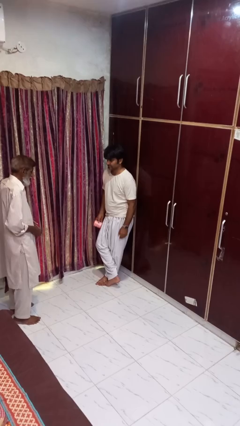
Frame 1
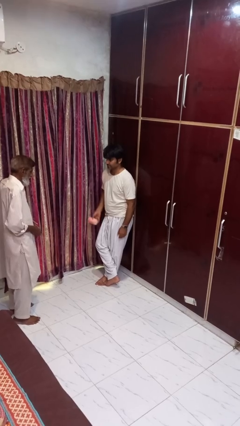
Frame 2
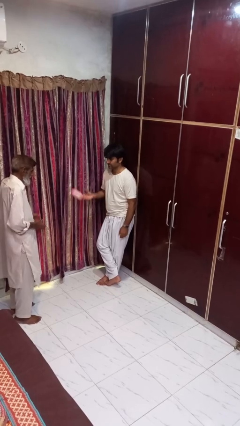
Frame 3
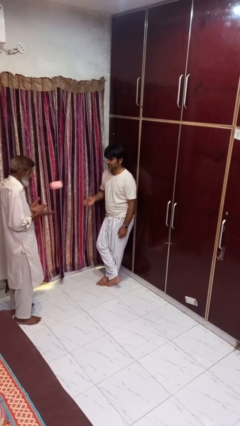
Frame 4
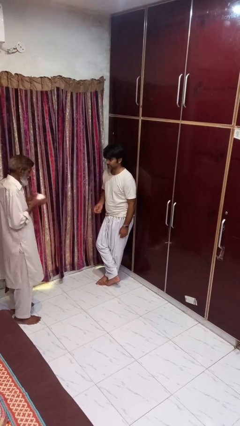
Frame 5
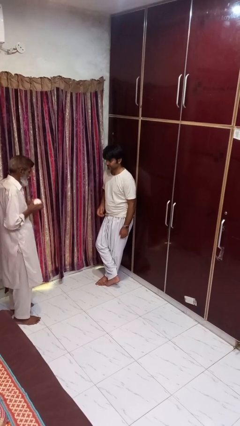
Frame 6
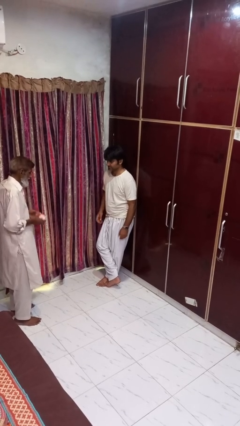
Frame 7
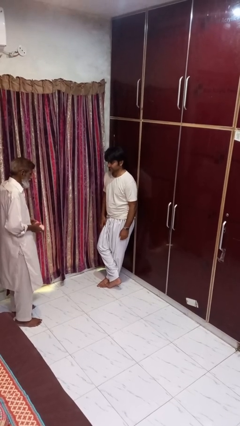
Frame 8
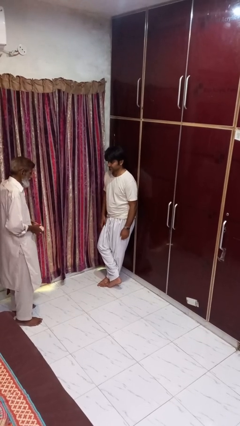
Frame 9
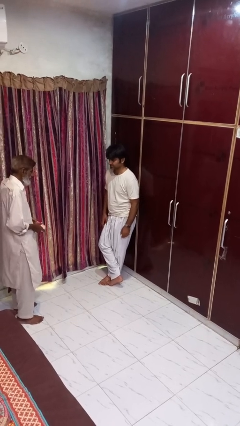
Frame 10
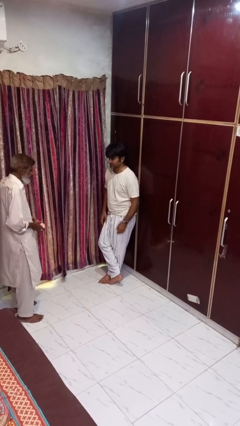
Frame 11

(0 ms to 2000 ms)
person throws object to person

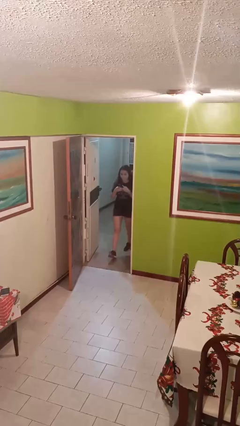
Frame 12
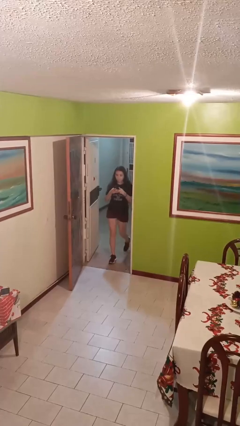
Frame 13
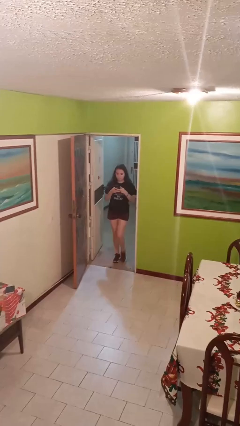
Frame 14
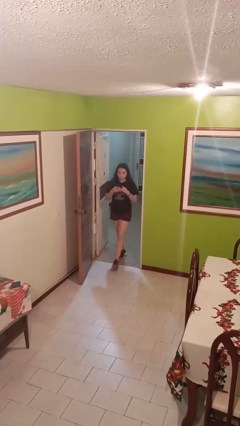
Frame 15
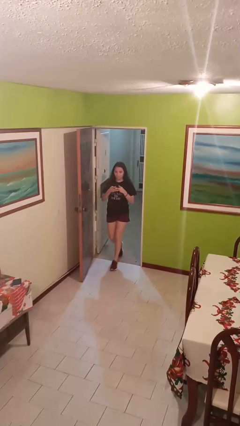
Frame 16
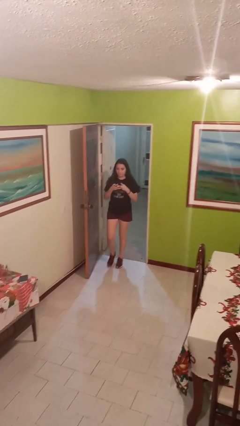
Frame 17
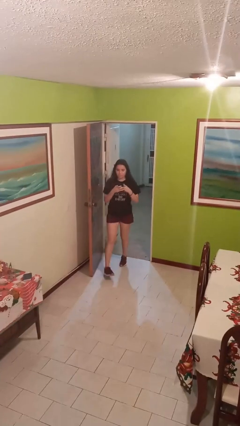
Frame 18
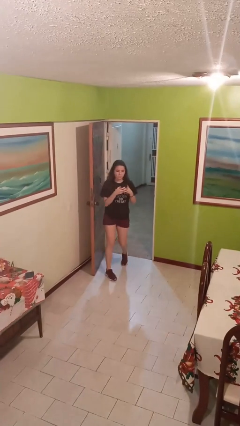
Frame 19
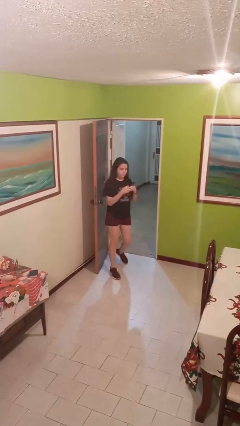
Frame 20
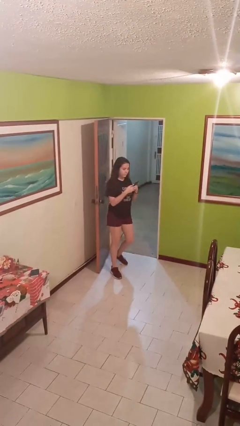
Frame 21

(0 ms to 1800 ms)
person enters scene through structure

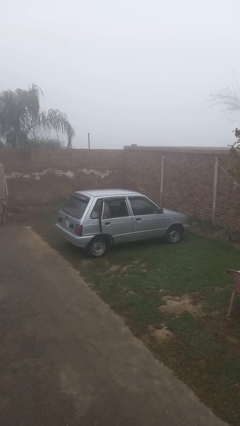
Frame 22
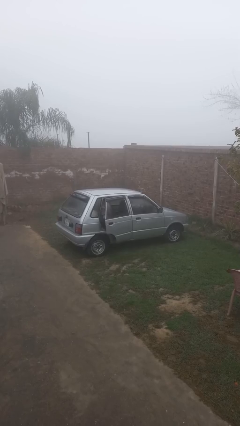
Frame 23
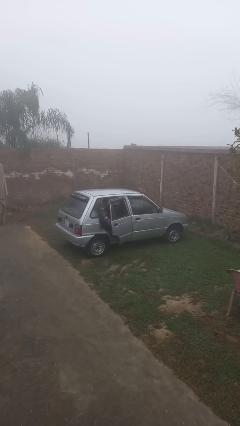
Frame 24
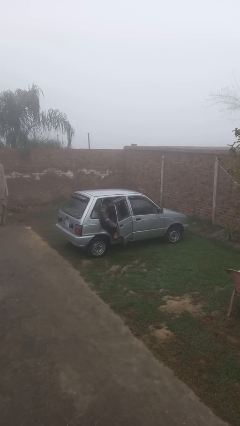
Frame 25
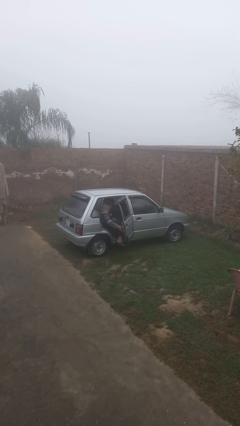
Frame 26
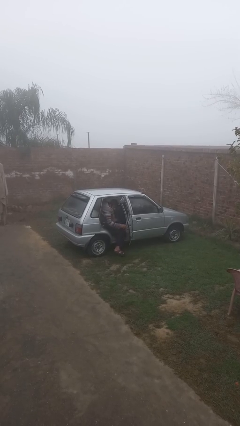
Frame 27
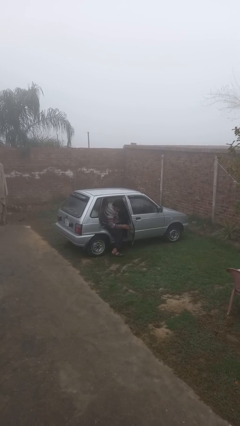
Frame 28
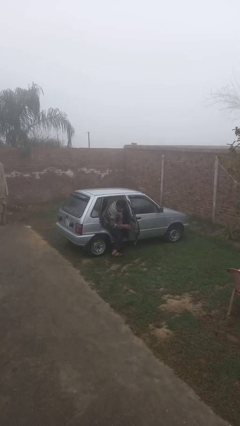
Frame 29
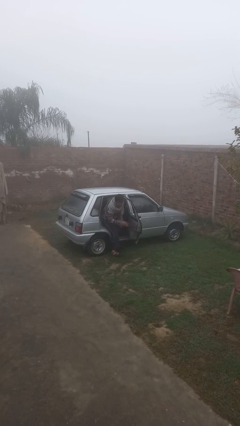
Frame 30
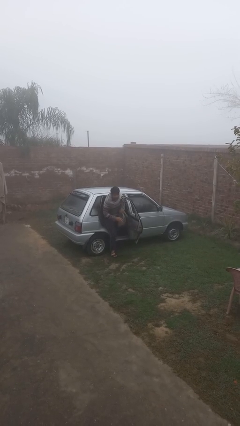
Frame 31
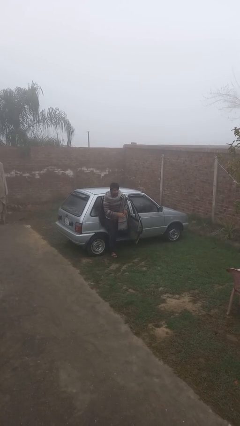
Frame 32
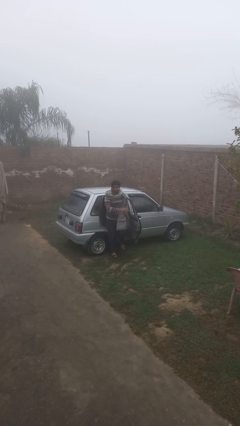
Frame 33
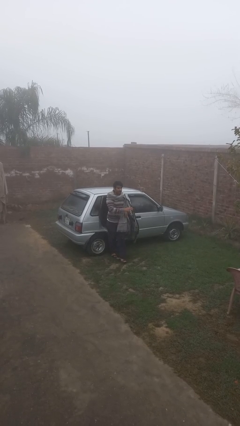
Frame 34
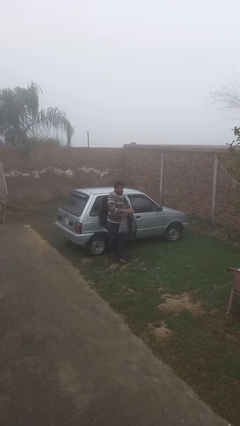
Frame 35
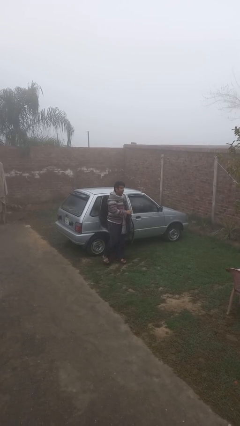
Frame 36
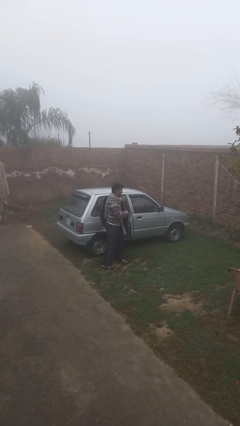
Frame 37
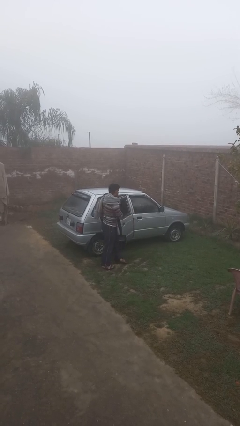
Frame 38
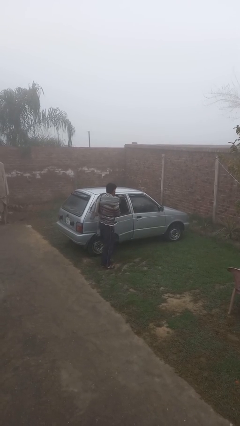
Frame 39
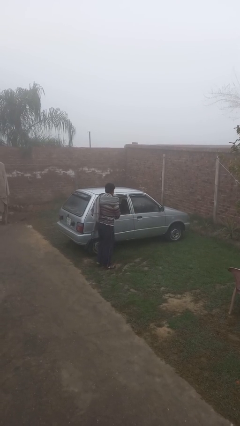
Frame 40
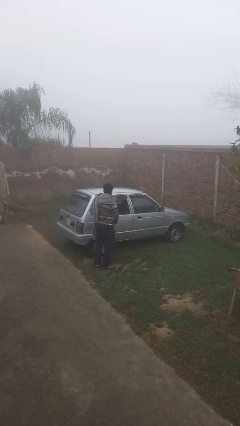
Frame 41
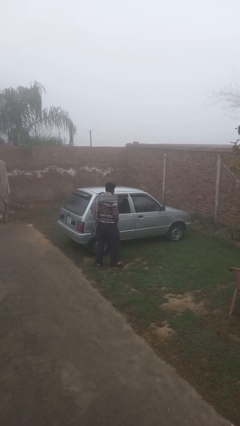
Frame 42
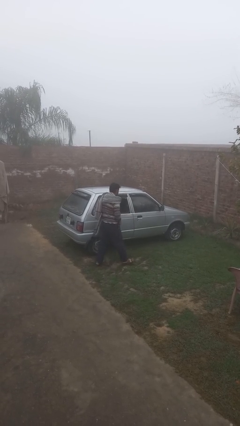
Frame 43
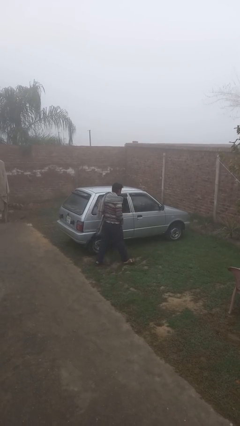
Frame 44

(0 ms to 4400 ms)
car drops off person

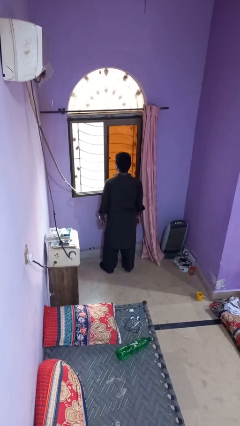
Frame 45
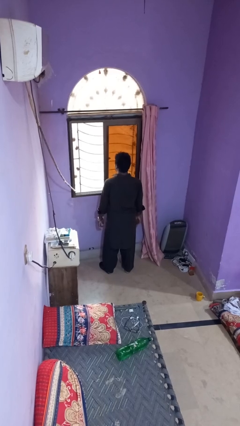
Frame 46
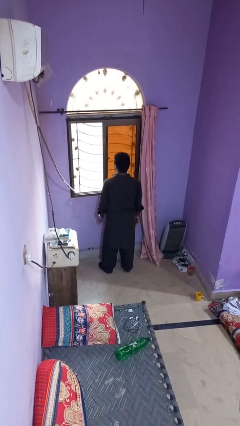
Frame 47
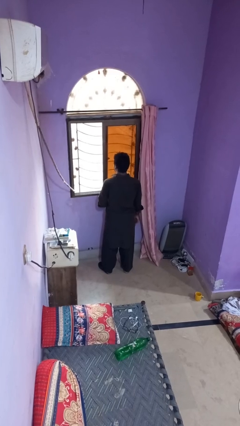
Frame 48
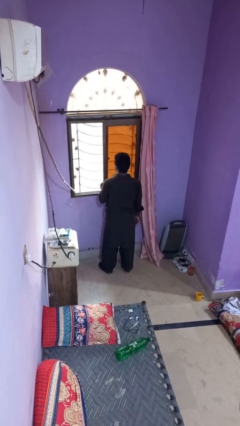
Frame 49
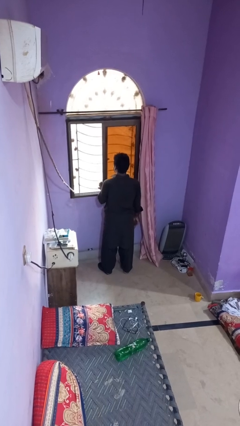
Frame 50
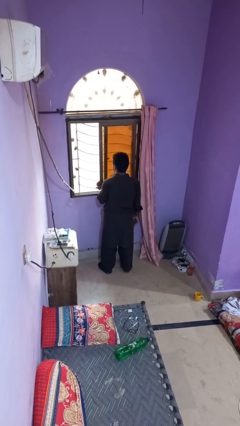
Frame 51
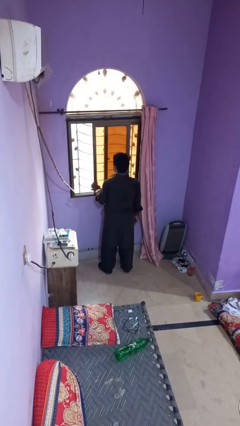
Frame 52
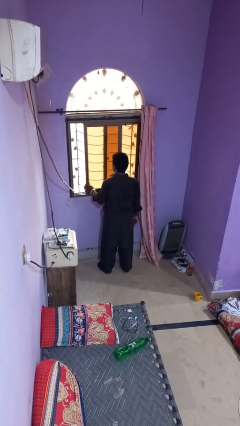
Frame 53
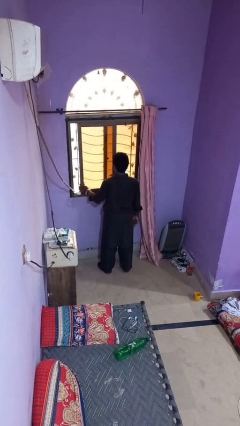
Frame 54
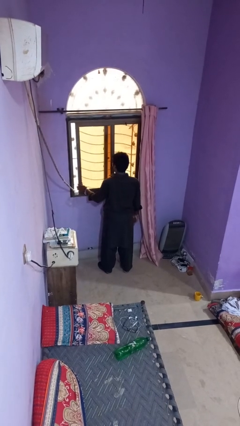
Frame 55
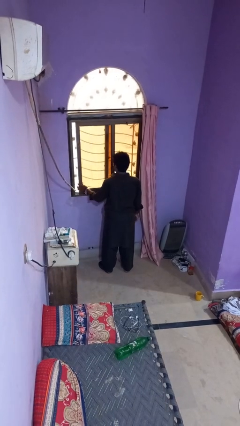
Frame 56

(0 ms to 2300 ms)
person closes home window

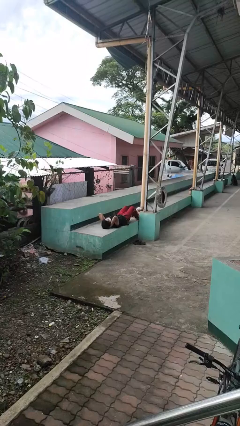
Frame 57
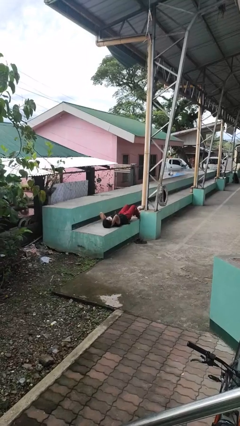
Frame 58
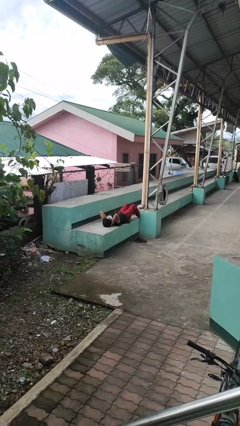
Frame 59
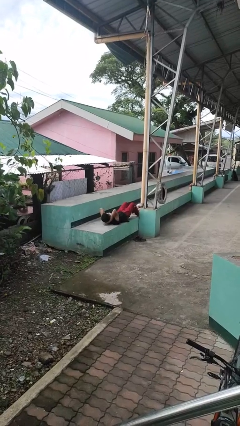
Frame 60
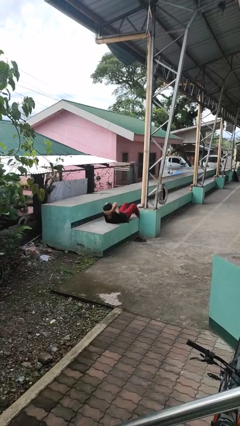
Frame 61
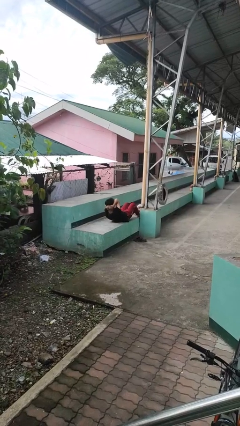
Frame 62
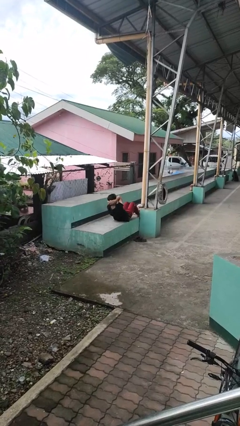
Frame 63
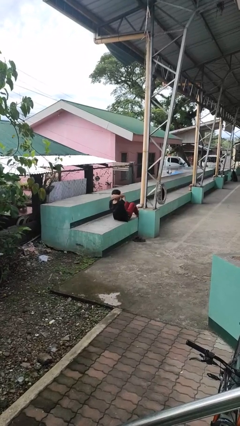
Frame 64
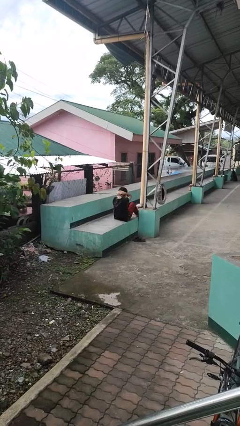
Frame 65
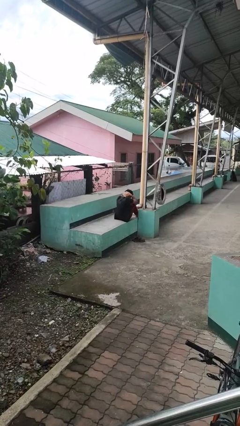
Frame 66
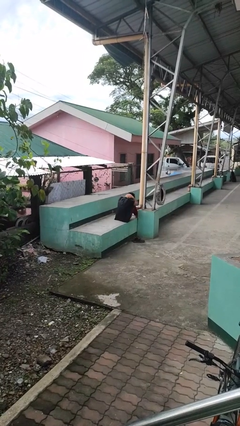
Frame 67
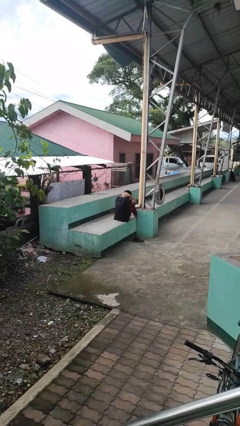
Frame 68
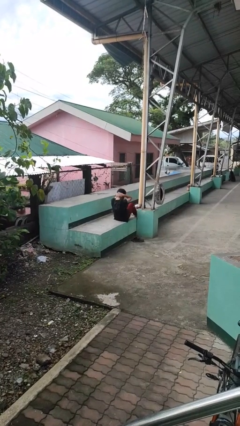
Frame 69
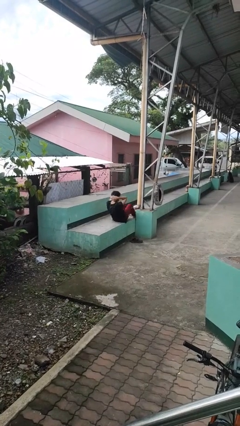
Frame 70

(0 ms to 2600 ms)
person exercises with situp

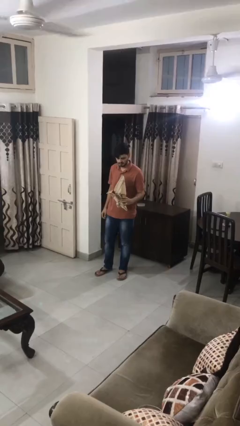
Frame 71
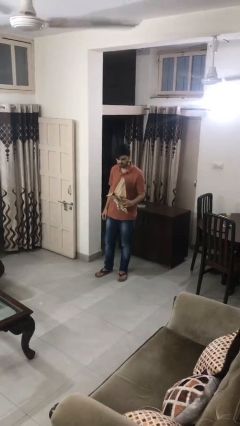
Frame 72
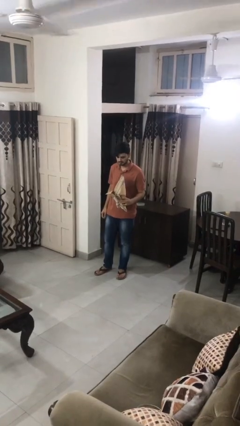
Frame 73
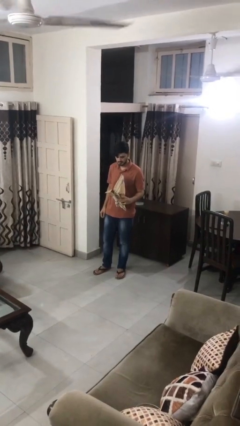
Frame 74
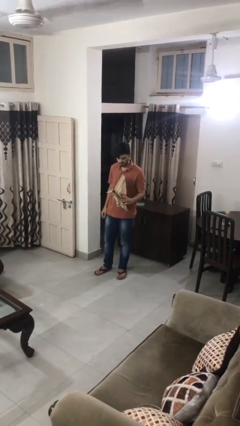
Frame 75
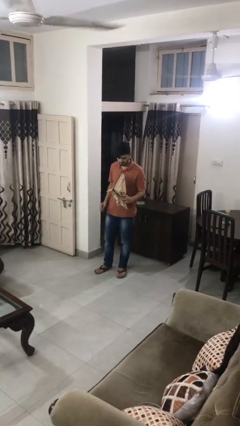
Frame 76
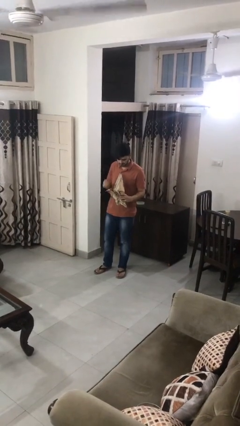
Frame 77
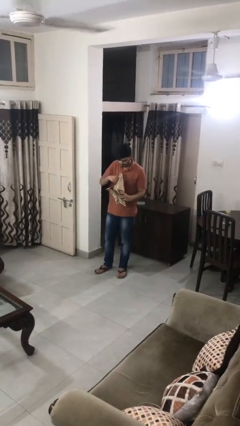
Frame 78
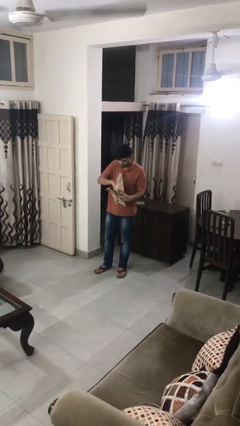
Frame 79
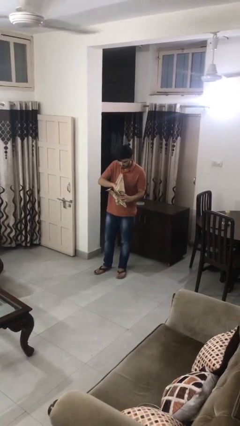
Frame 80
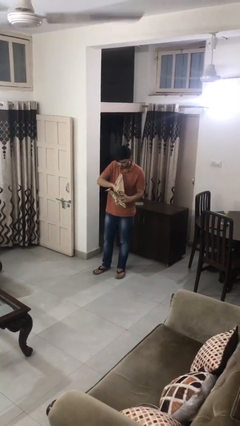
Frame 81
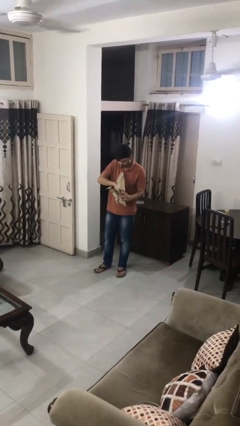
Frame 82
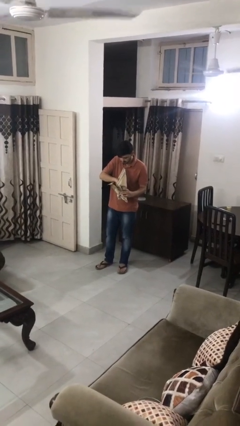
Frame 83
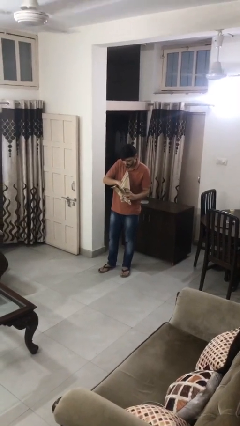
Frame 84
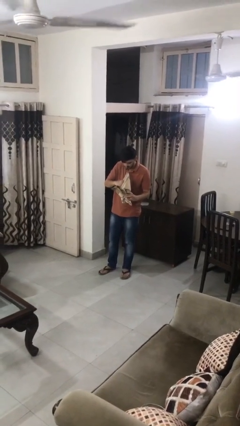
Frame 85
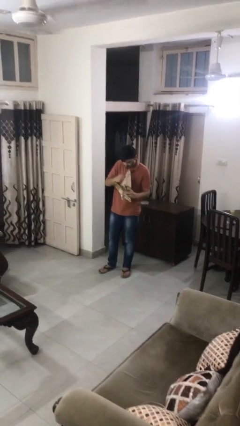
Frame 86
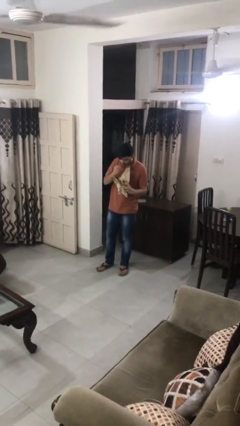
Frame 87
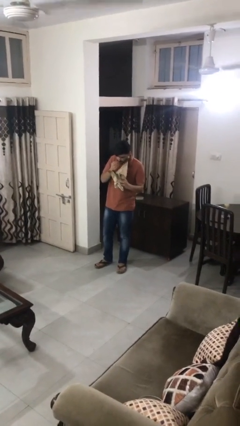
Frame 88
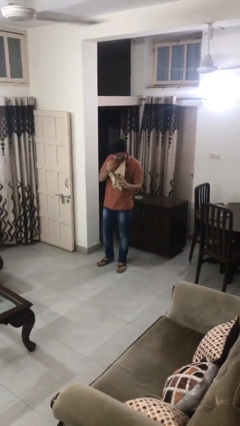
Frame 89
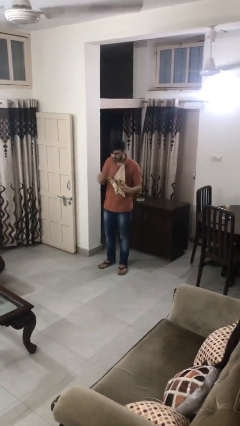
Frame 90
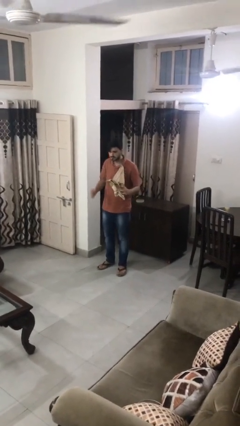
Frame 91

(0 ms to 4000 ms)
person eats snack from bag

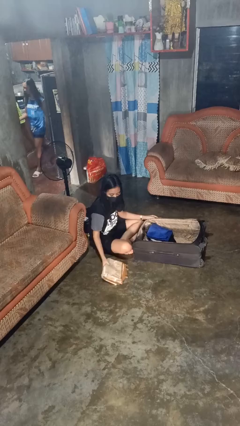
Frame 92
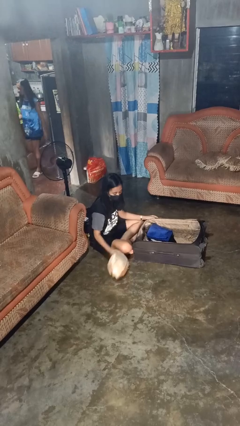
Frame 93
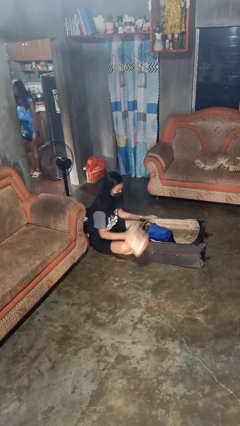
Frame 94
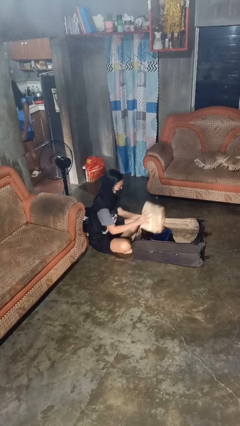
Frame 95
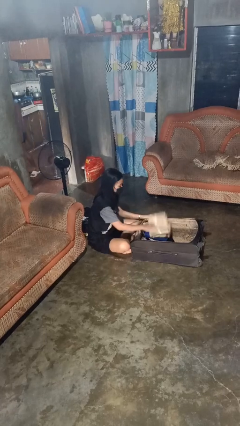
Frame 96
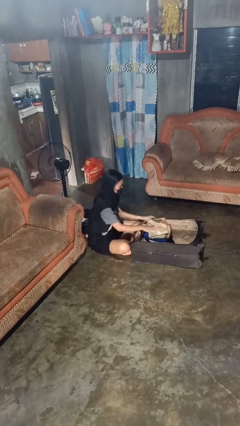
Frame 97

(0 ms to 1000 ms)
person loads clothes into suitcase
